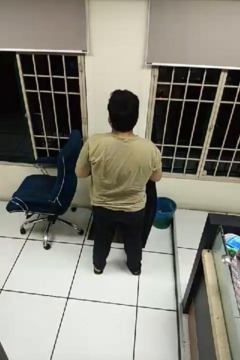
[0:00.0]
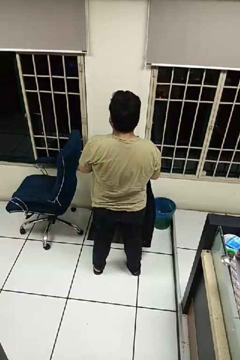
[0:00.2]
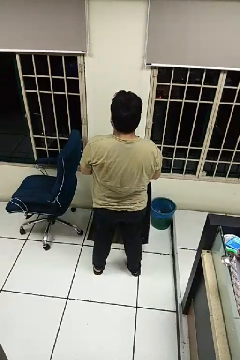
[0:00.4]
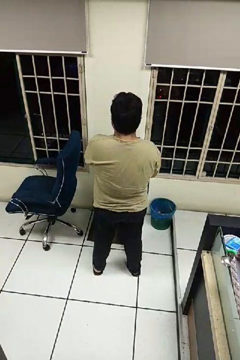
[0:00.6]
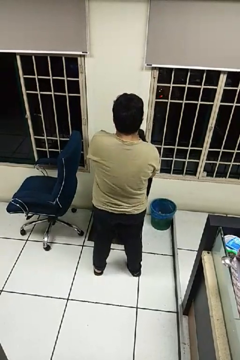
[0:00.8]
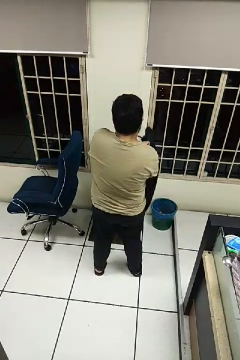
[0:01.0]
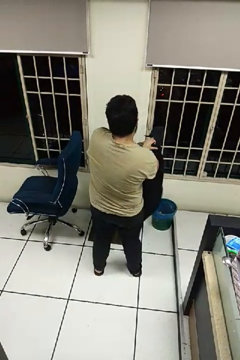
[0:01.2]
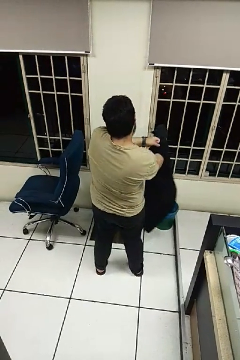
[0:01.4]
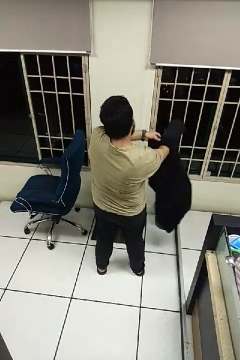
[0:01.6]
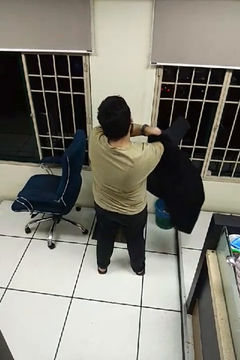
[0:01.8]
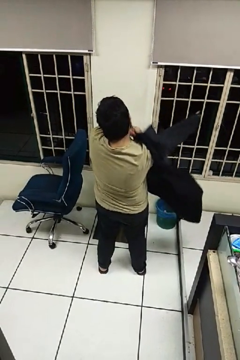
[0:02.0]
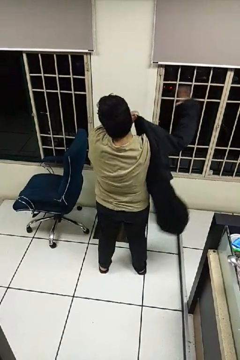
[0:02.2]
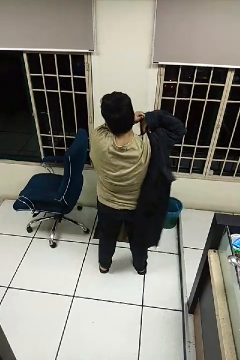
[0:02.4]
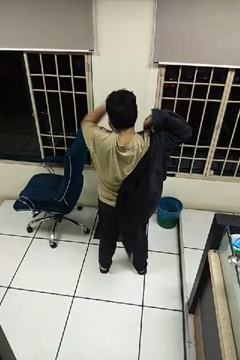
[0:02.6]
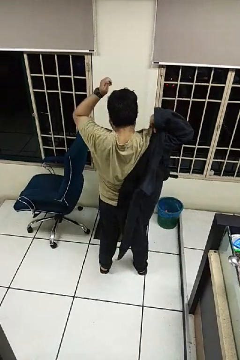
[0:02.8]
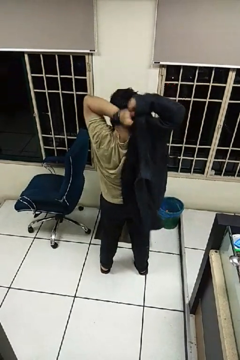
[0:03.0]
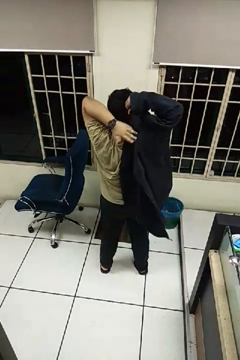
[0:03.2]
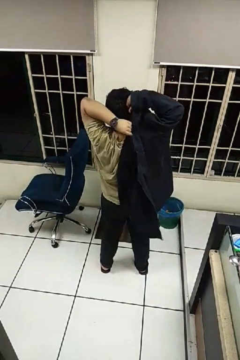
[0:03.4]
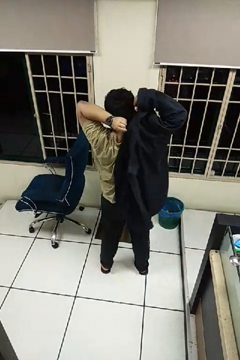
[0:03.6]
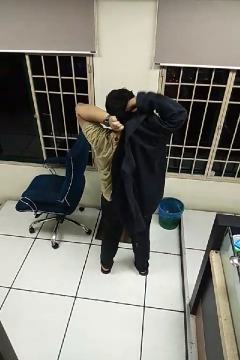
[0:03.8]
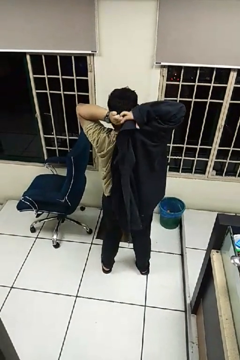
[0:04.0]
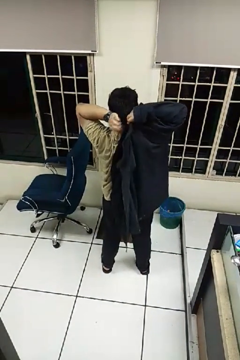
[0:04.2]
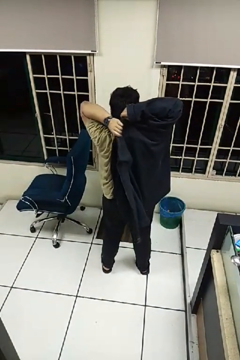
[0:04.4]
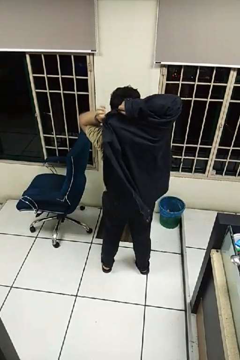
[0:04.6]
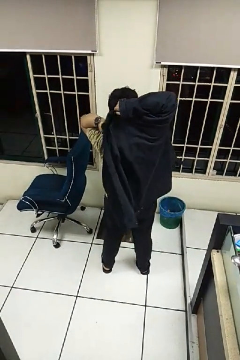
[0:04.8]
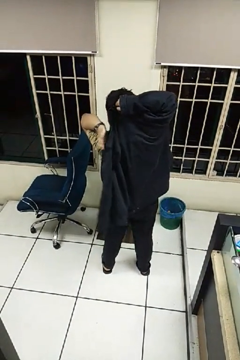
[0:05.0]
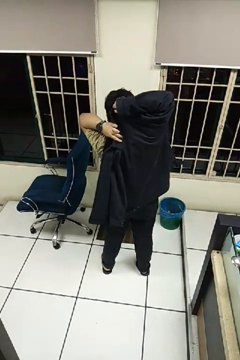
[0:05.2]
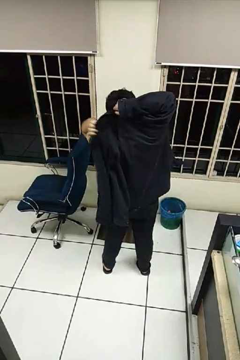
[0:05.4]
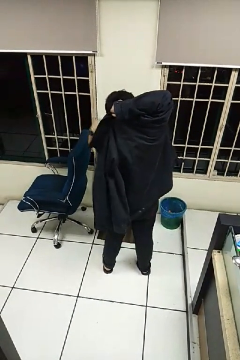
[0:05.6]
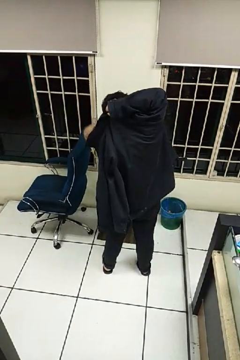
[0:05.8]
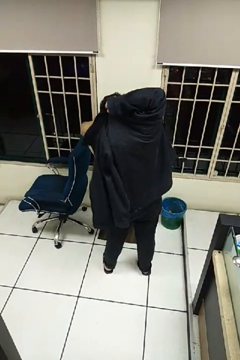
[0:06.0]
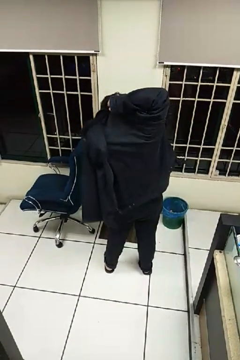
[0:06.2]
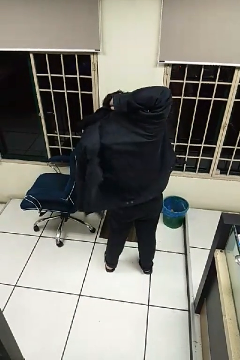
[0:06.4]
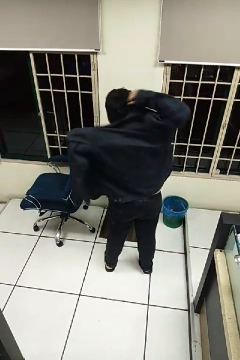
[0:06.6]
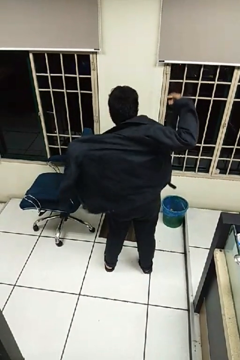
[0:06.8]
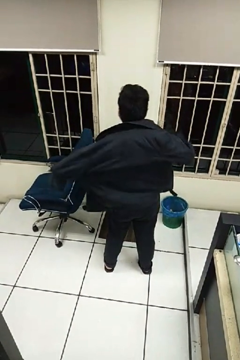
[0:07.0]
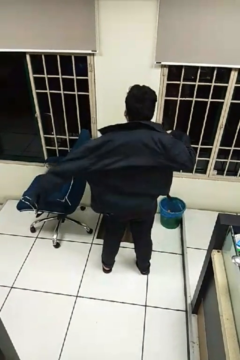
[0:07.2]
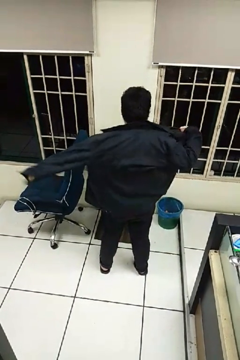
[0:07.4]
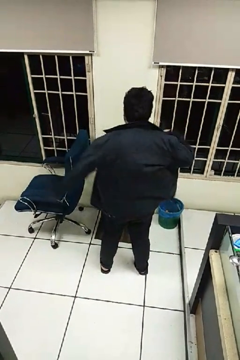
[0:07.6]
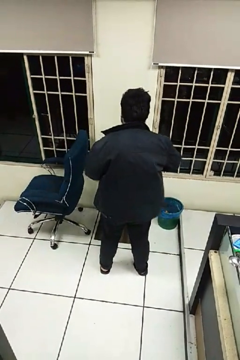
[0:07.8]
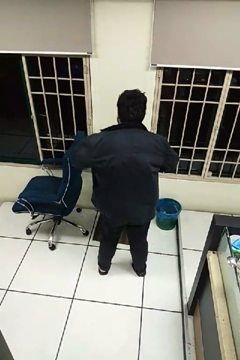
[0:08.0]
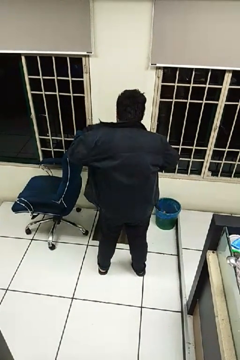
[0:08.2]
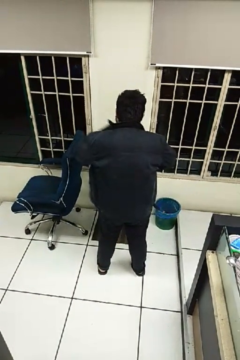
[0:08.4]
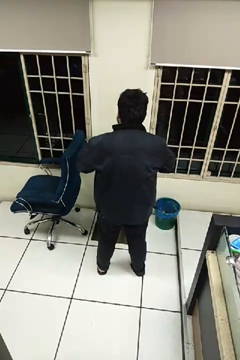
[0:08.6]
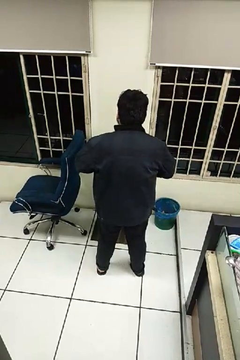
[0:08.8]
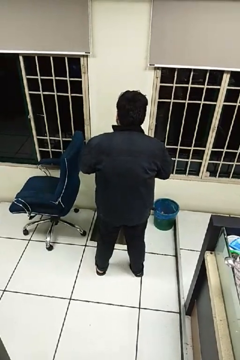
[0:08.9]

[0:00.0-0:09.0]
person puts on shirt

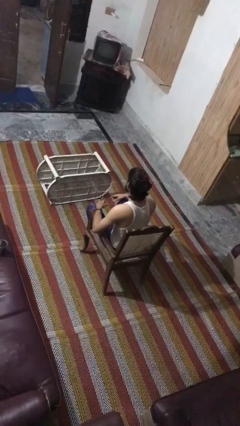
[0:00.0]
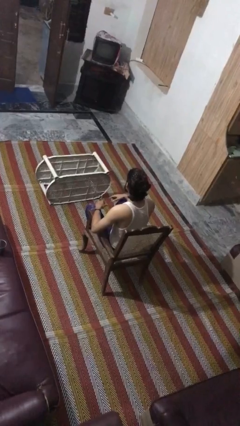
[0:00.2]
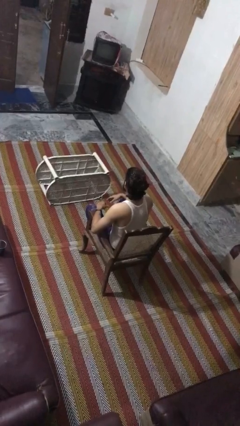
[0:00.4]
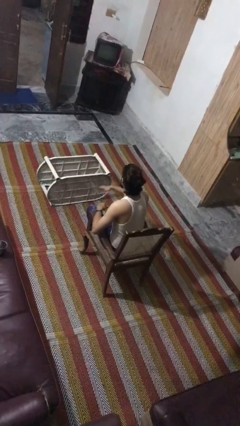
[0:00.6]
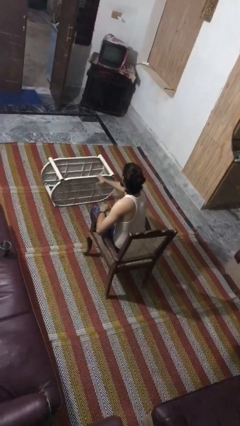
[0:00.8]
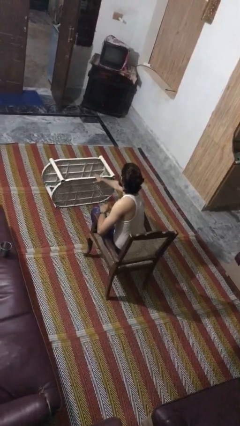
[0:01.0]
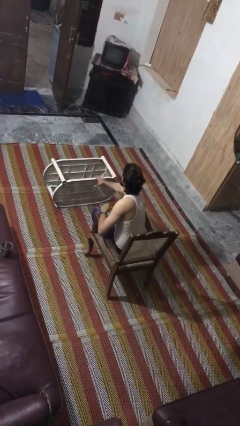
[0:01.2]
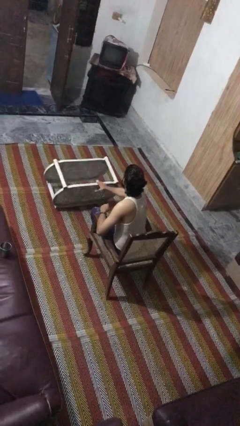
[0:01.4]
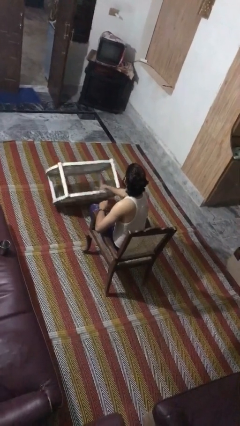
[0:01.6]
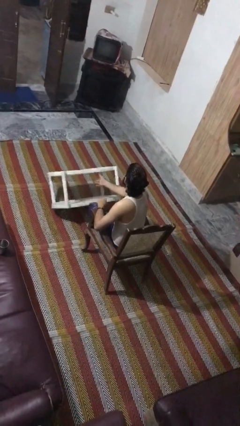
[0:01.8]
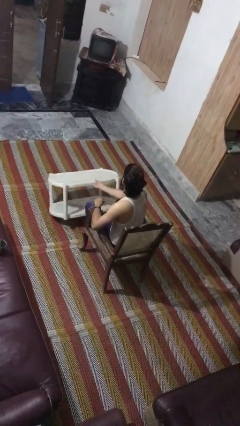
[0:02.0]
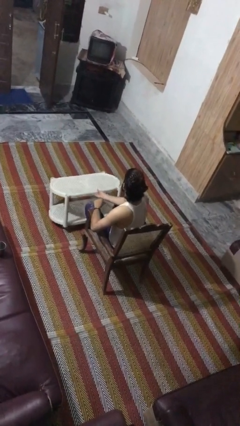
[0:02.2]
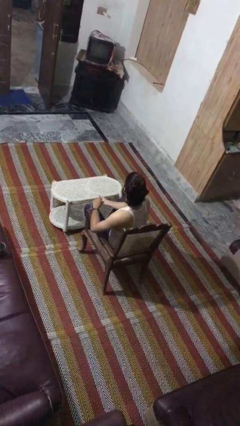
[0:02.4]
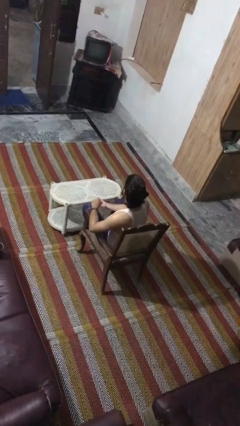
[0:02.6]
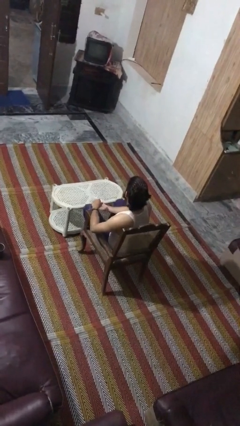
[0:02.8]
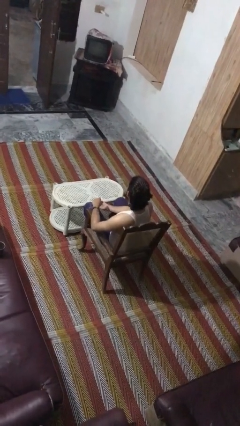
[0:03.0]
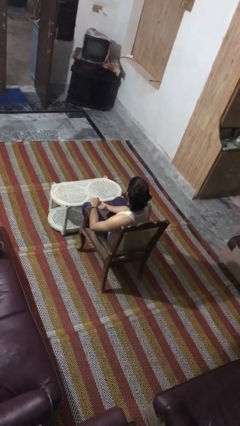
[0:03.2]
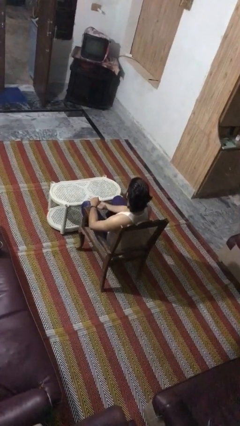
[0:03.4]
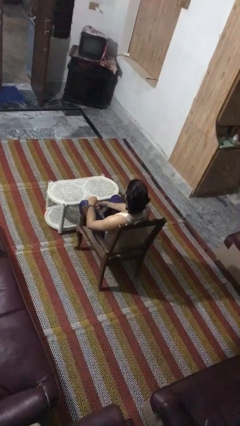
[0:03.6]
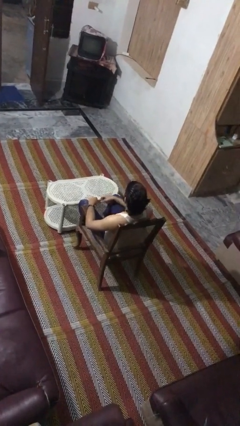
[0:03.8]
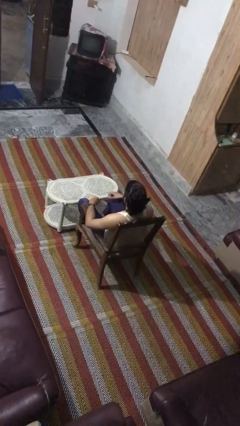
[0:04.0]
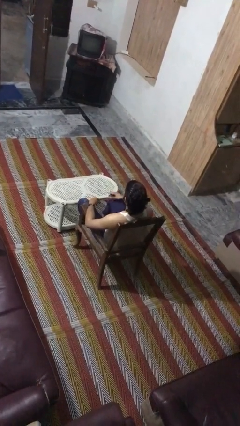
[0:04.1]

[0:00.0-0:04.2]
person sets upright furniture

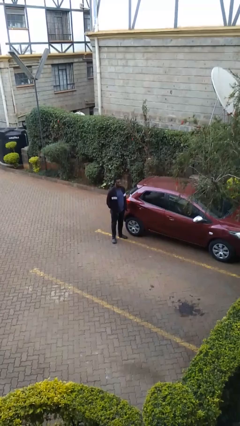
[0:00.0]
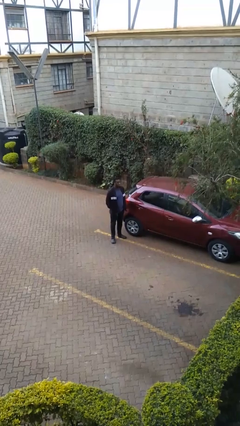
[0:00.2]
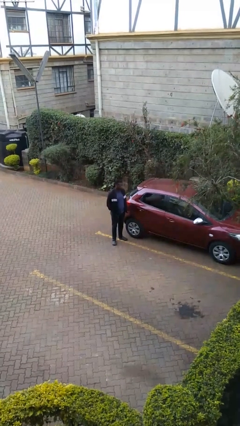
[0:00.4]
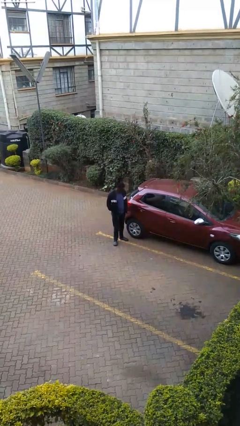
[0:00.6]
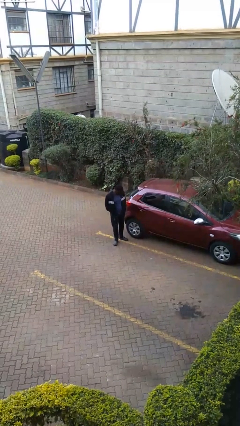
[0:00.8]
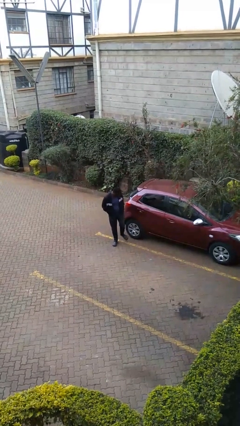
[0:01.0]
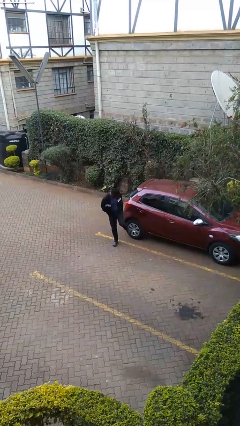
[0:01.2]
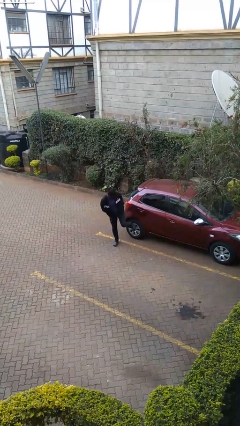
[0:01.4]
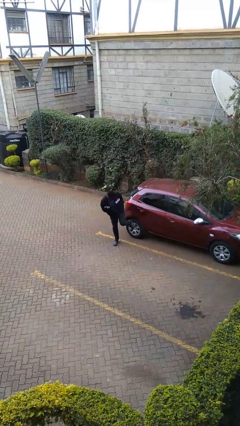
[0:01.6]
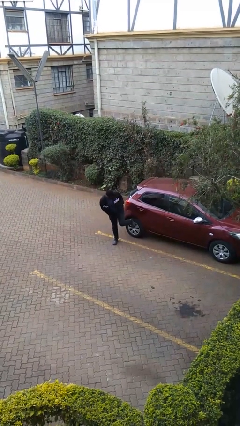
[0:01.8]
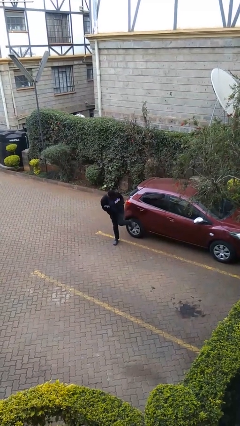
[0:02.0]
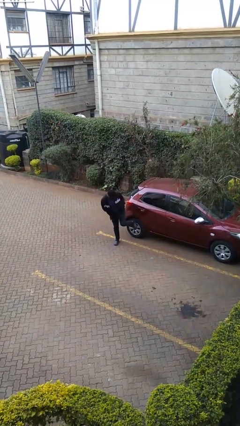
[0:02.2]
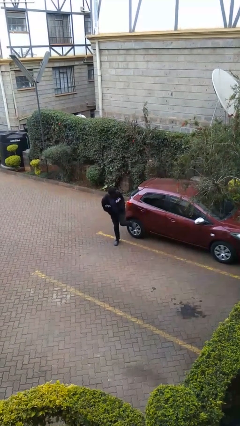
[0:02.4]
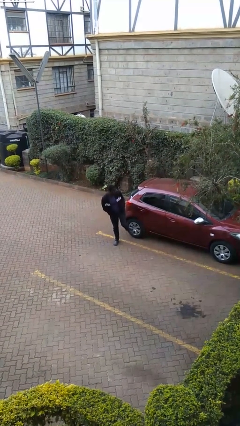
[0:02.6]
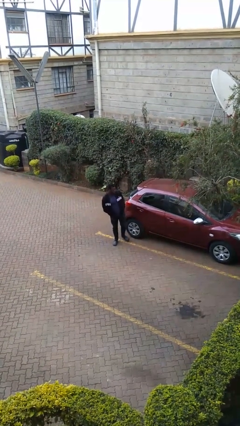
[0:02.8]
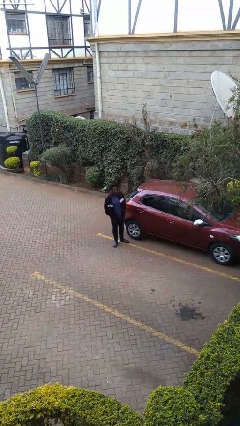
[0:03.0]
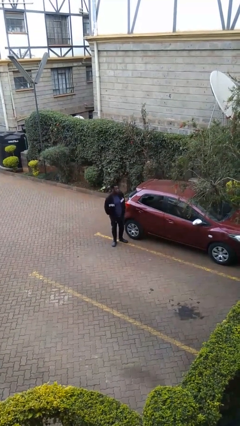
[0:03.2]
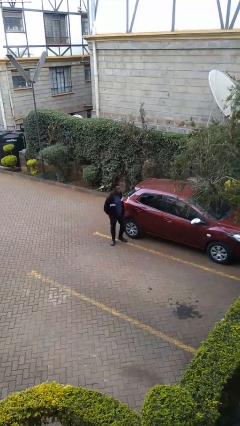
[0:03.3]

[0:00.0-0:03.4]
person kicks car tires

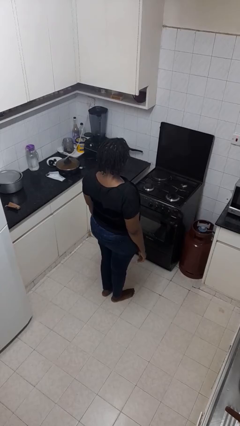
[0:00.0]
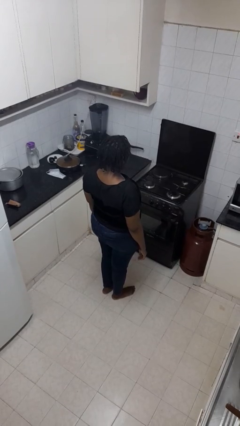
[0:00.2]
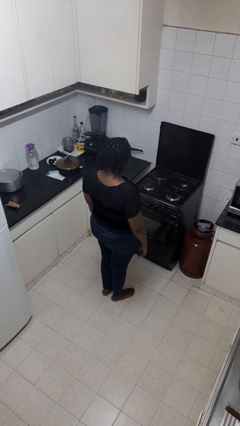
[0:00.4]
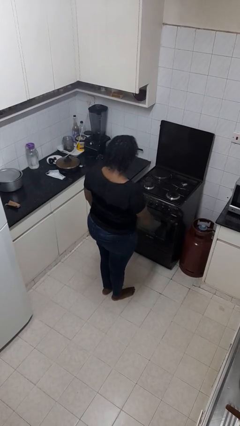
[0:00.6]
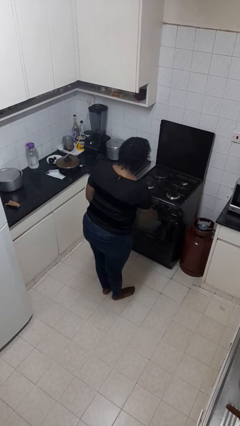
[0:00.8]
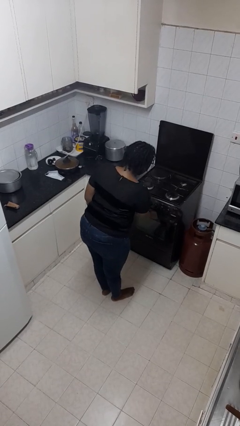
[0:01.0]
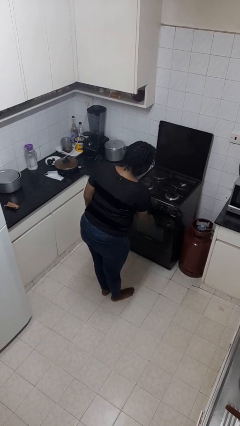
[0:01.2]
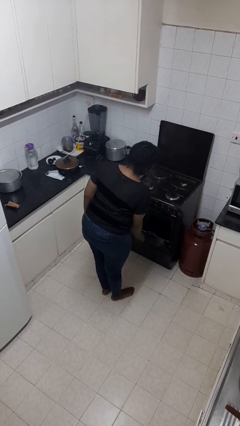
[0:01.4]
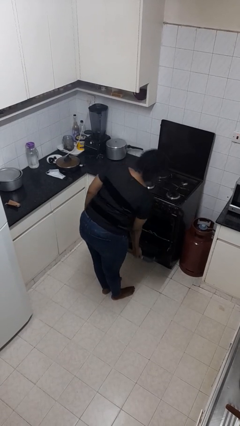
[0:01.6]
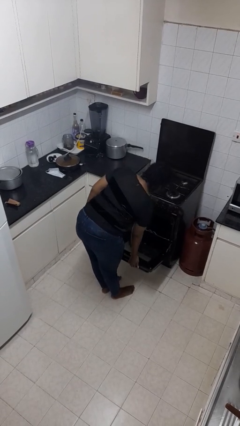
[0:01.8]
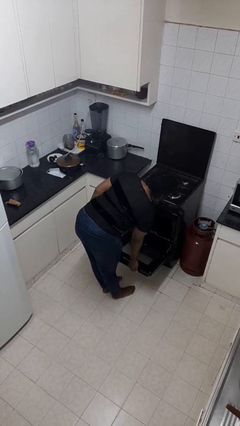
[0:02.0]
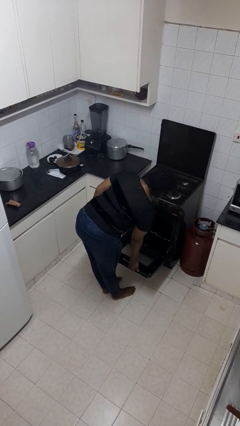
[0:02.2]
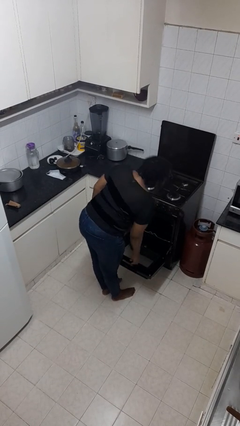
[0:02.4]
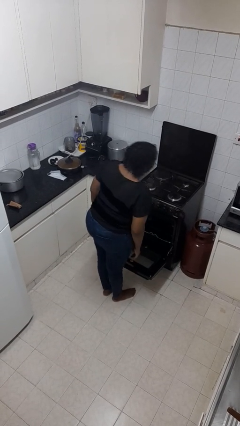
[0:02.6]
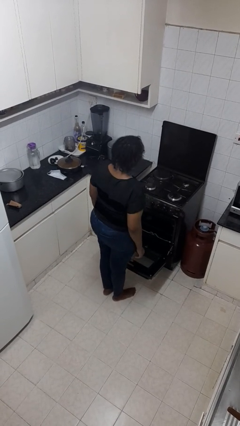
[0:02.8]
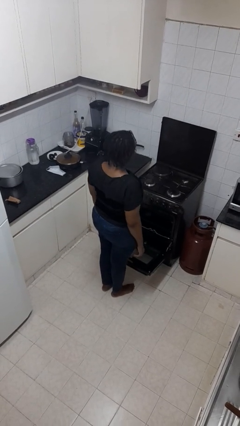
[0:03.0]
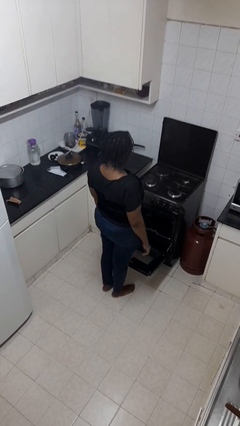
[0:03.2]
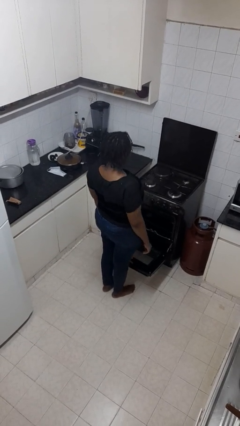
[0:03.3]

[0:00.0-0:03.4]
person opens oven door
